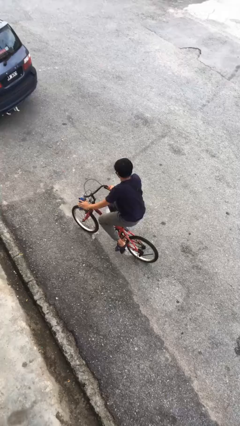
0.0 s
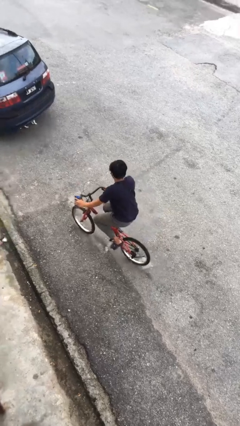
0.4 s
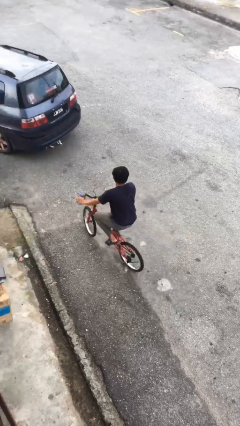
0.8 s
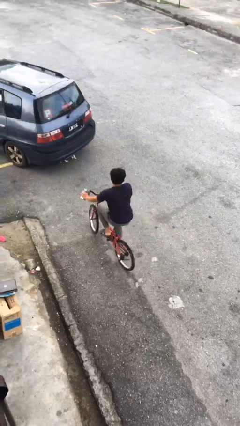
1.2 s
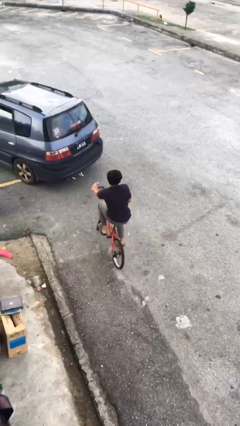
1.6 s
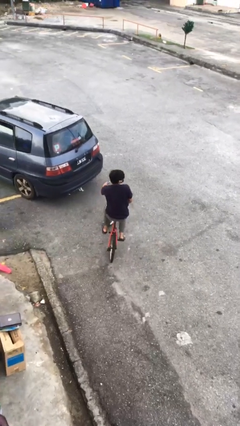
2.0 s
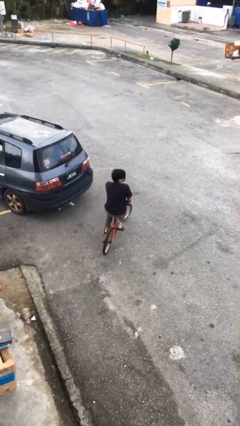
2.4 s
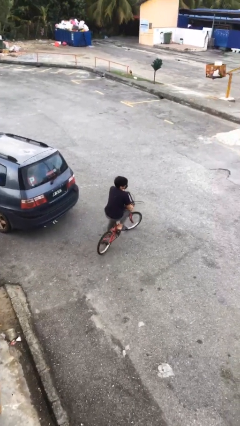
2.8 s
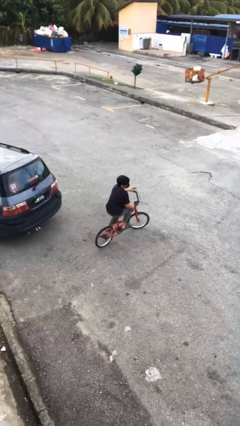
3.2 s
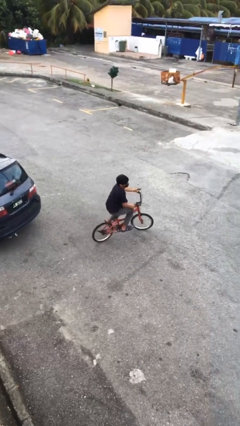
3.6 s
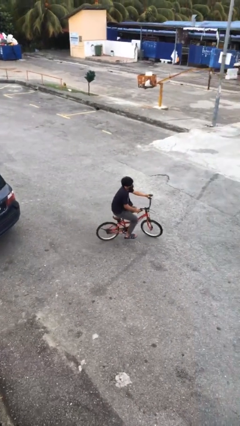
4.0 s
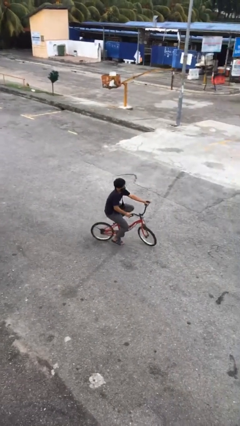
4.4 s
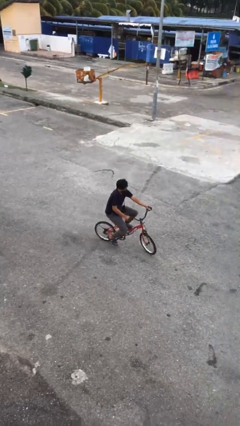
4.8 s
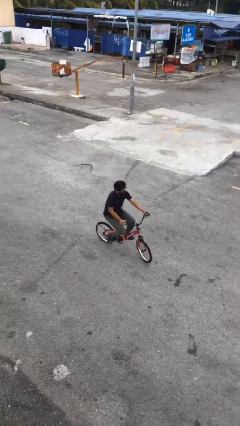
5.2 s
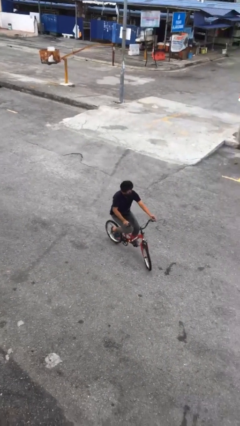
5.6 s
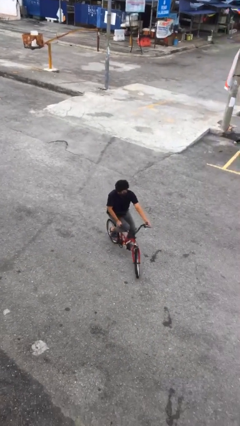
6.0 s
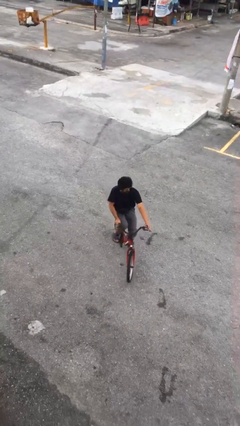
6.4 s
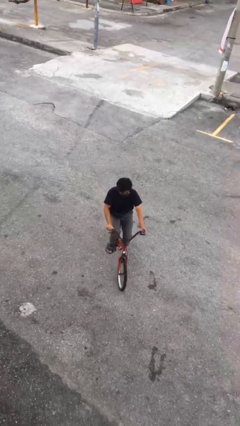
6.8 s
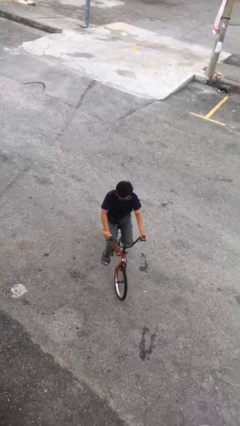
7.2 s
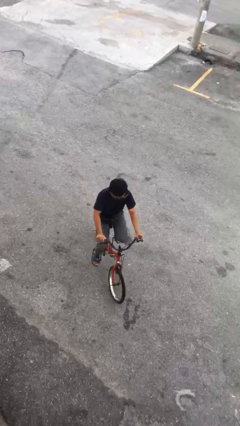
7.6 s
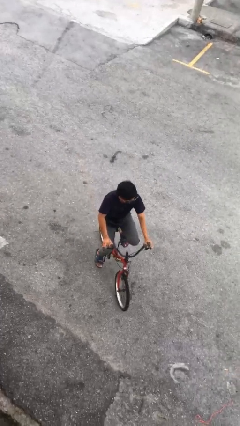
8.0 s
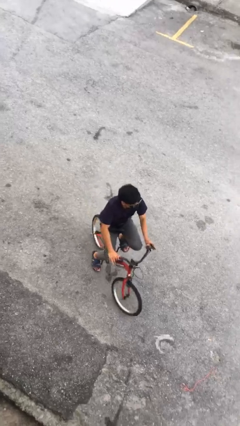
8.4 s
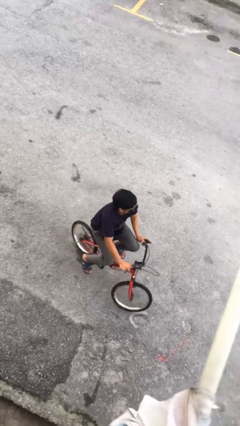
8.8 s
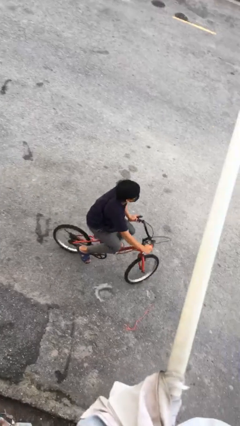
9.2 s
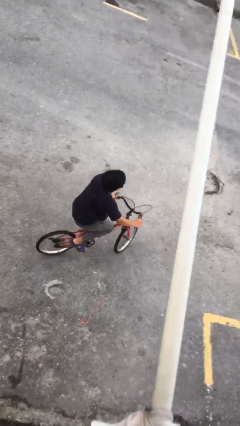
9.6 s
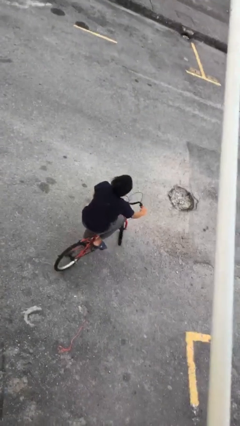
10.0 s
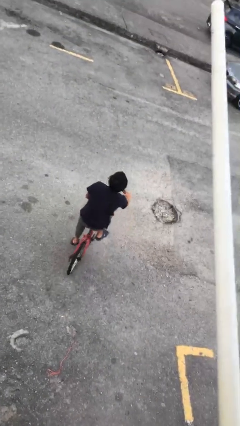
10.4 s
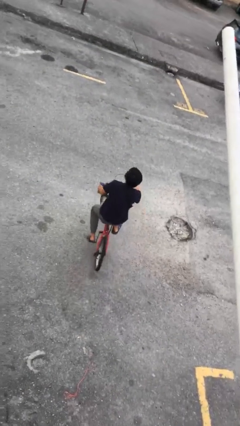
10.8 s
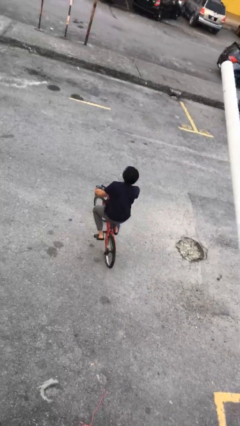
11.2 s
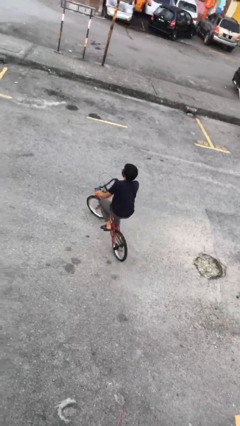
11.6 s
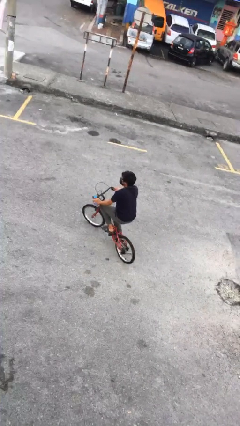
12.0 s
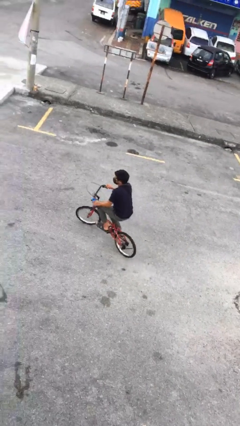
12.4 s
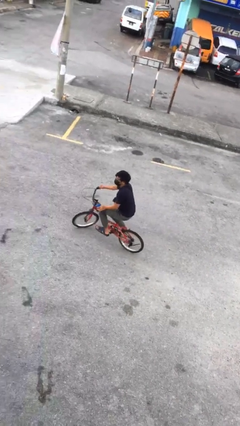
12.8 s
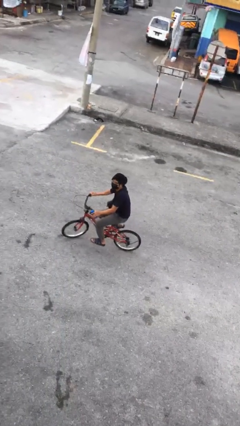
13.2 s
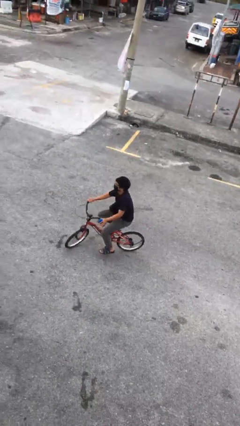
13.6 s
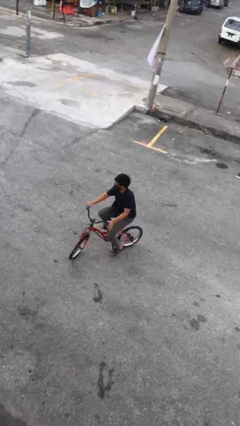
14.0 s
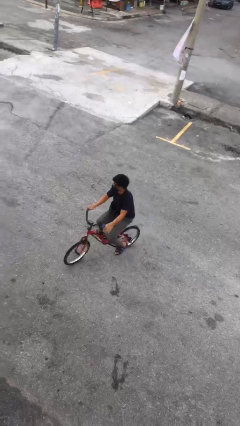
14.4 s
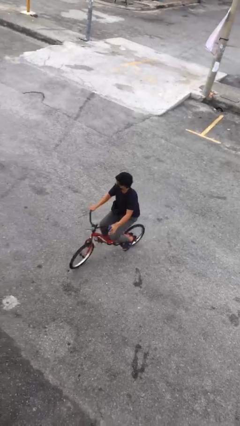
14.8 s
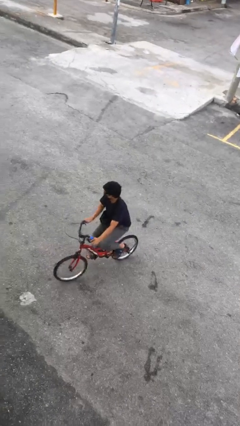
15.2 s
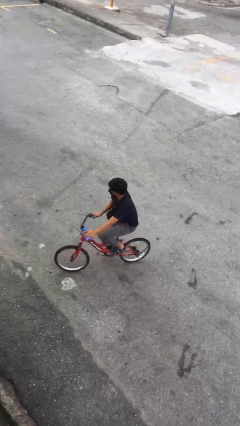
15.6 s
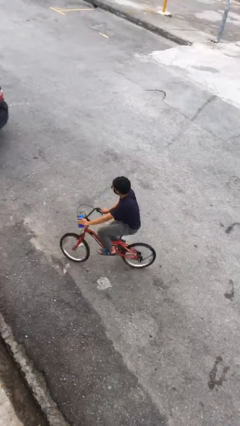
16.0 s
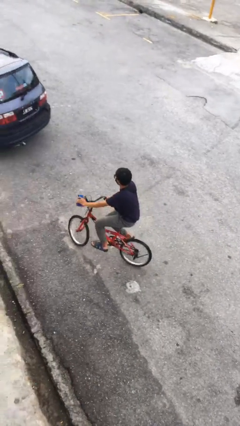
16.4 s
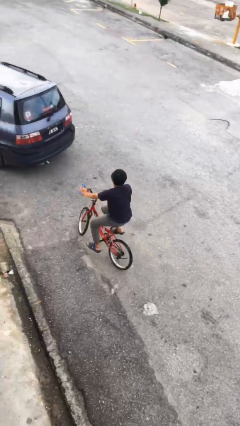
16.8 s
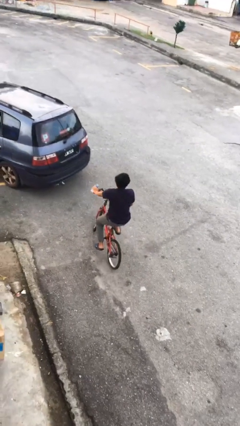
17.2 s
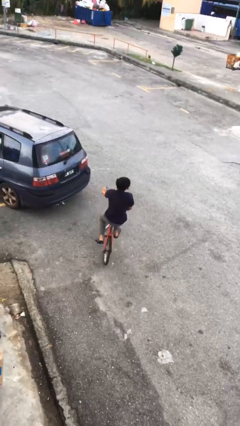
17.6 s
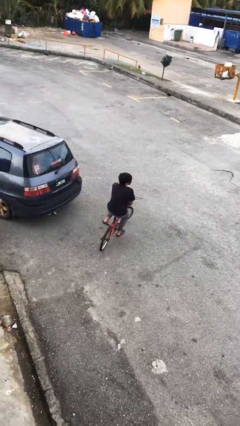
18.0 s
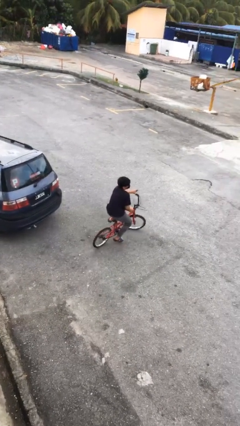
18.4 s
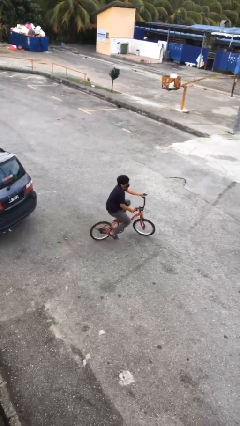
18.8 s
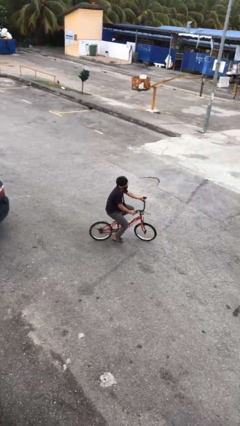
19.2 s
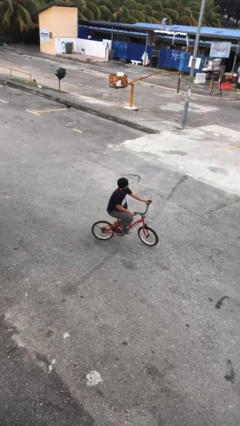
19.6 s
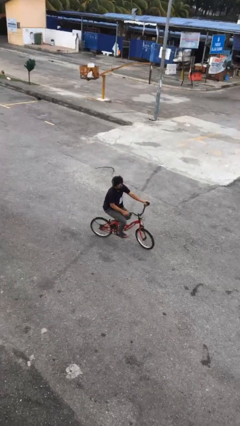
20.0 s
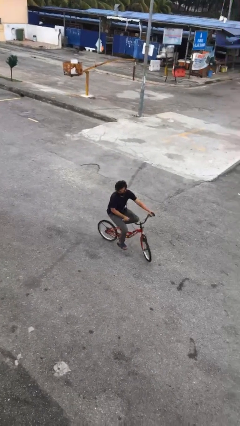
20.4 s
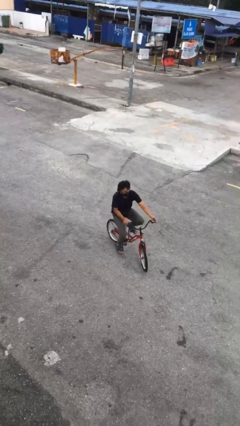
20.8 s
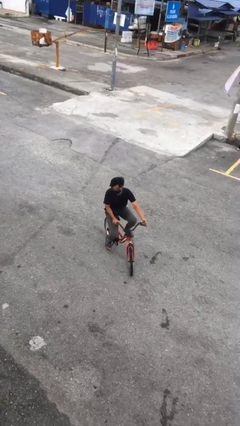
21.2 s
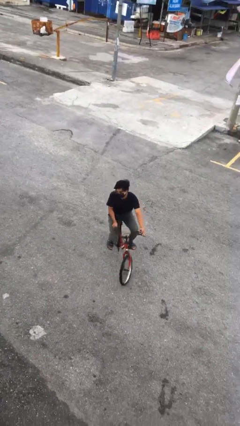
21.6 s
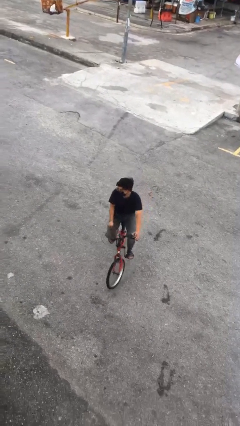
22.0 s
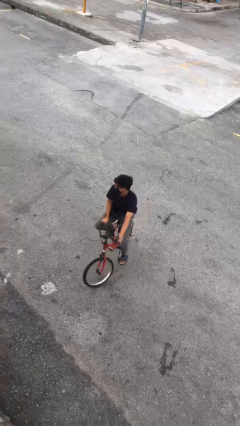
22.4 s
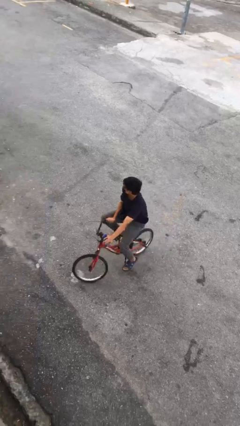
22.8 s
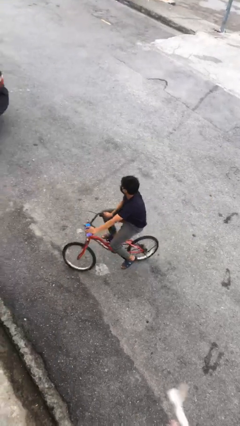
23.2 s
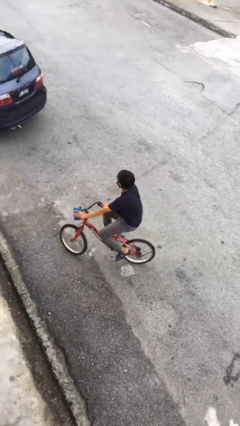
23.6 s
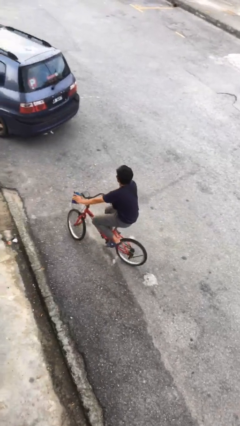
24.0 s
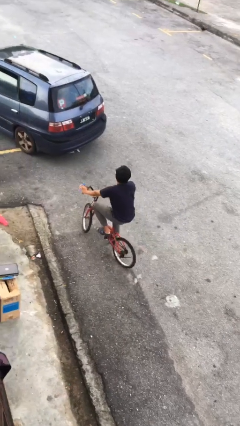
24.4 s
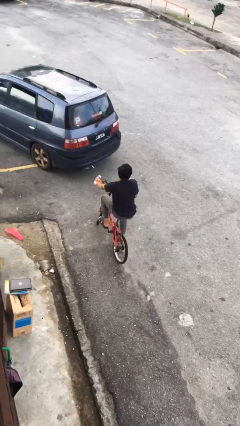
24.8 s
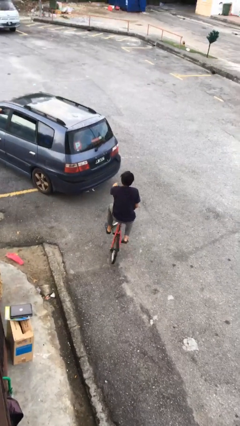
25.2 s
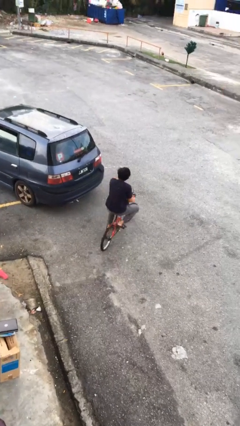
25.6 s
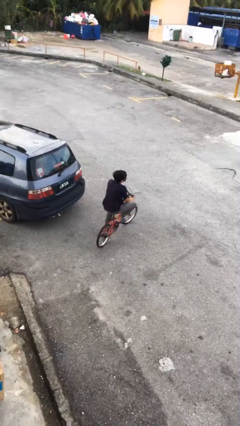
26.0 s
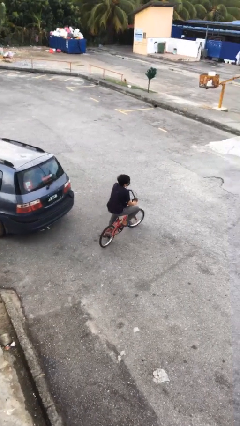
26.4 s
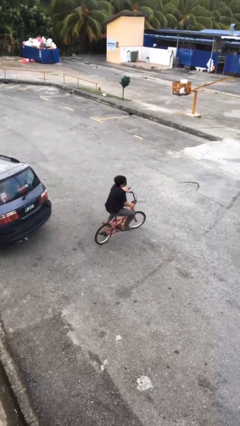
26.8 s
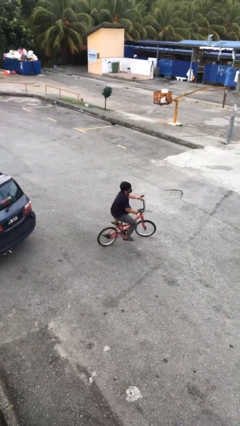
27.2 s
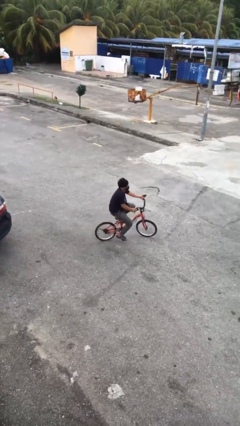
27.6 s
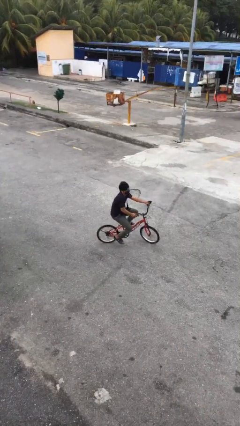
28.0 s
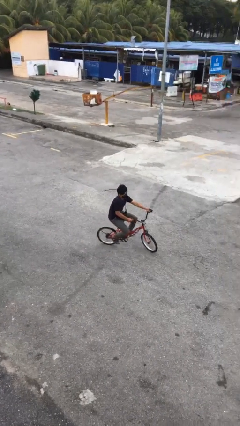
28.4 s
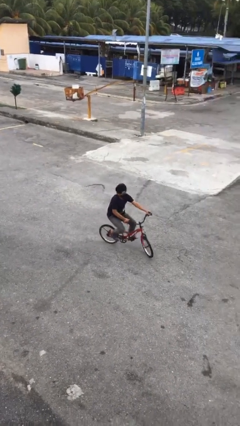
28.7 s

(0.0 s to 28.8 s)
person rides bicycle

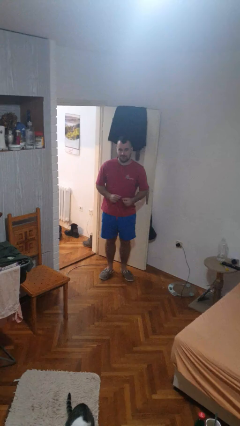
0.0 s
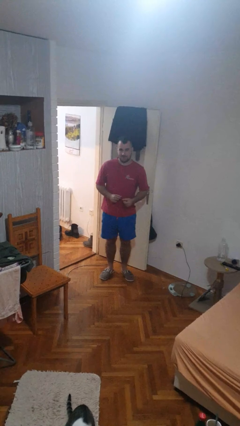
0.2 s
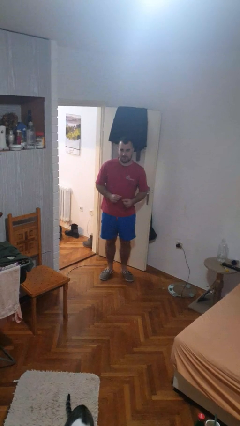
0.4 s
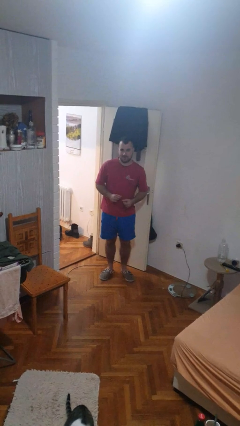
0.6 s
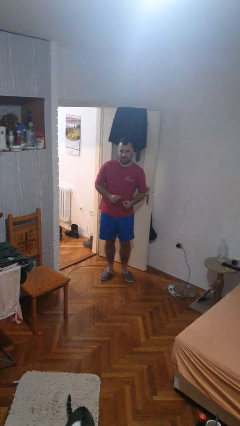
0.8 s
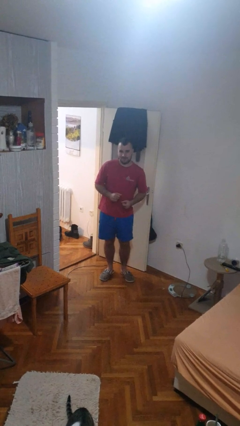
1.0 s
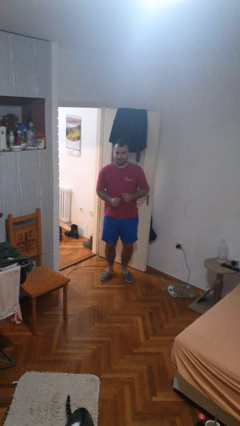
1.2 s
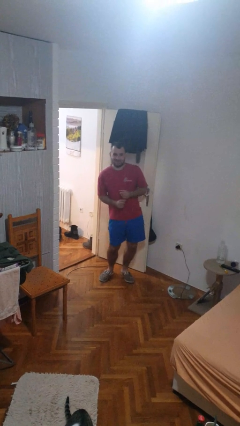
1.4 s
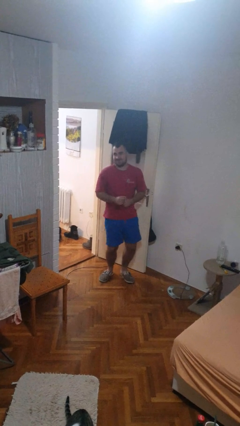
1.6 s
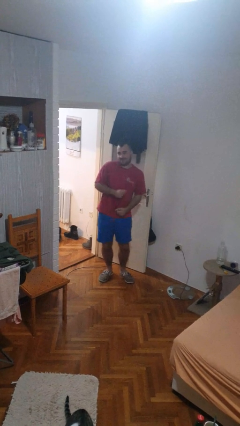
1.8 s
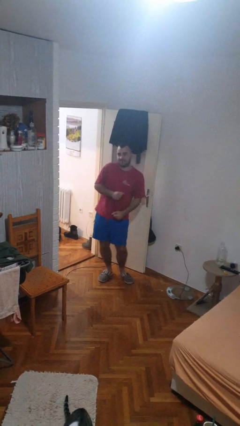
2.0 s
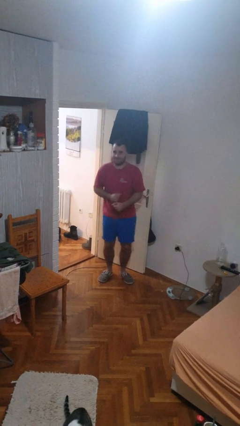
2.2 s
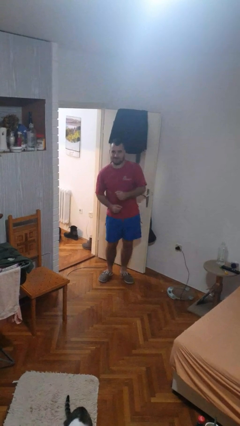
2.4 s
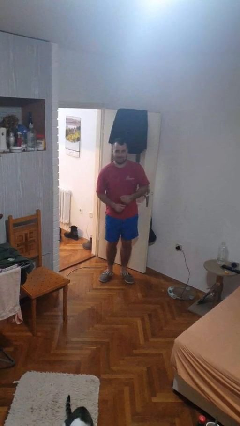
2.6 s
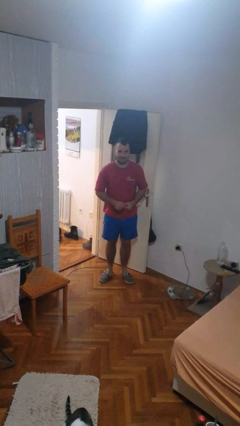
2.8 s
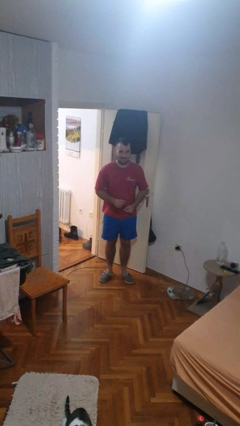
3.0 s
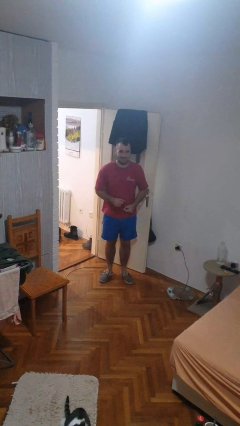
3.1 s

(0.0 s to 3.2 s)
person dances in place
